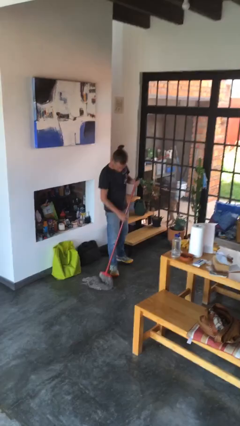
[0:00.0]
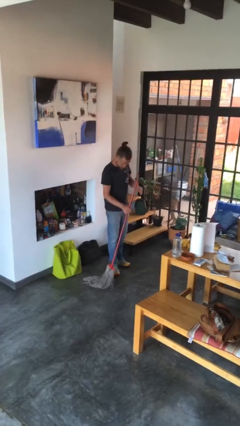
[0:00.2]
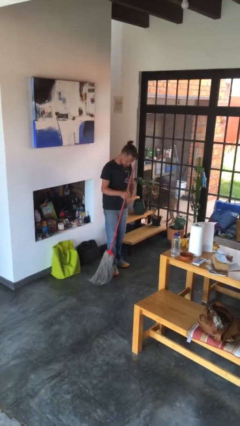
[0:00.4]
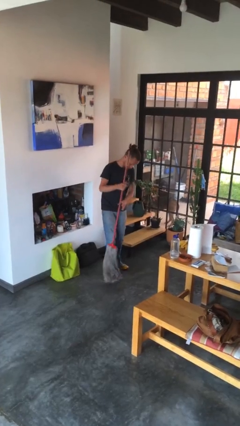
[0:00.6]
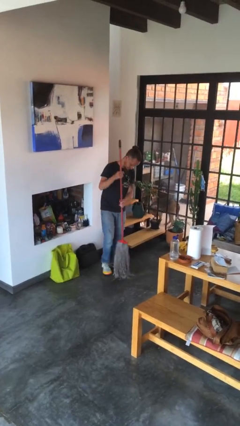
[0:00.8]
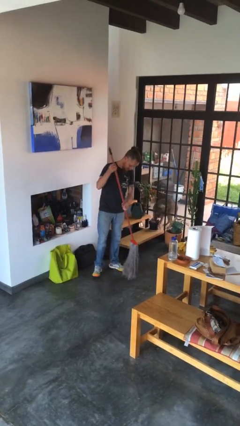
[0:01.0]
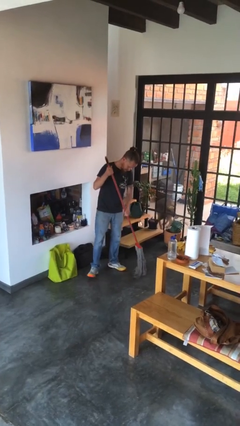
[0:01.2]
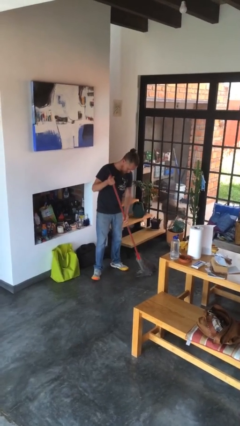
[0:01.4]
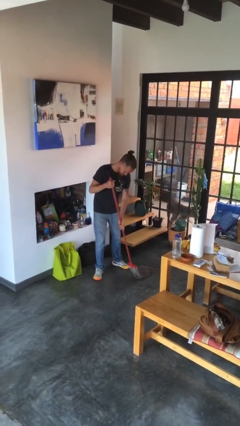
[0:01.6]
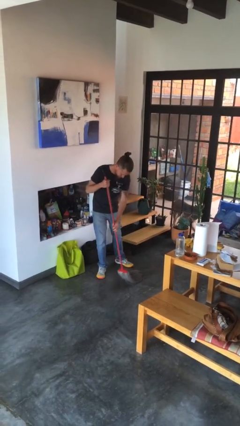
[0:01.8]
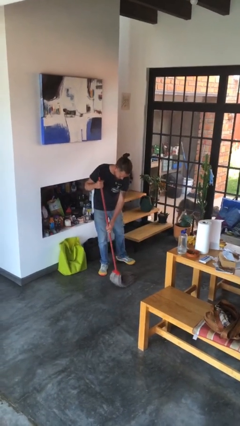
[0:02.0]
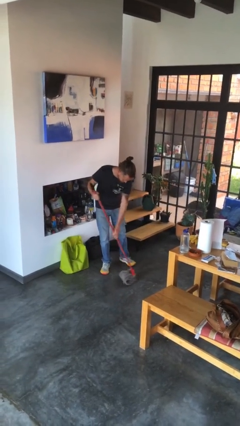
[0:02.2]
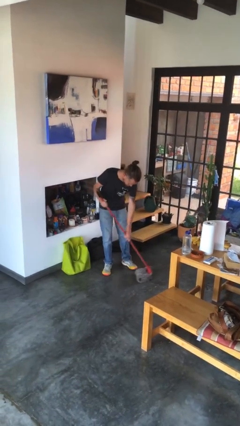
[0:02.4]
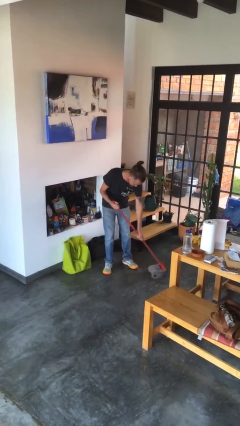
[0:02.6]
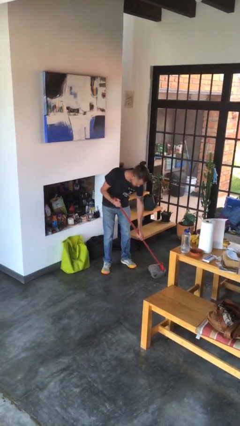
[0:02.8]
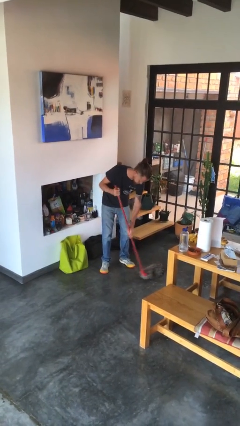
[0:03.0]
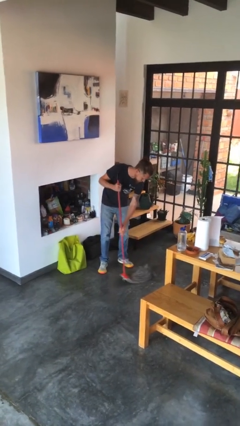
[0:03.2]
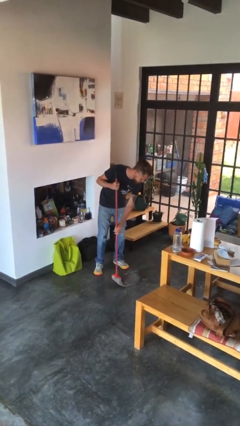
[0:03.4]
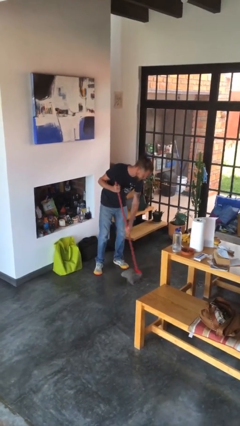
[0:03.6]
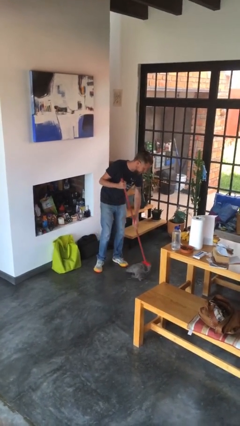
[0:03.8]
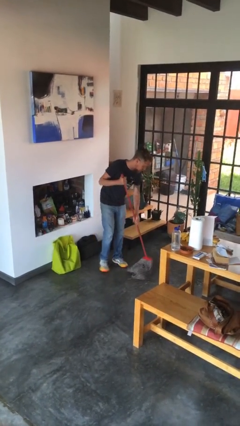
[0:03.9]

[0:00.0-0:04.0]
person mops

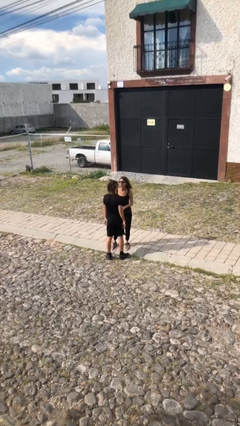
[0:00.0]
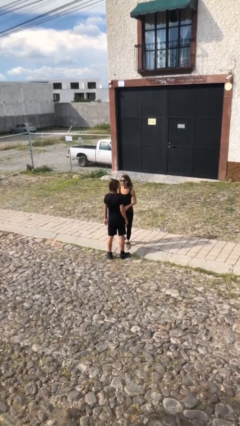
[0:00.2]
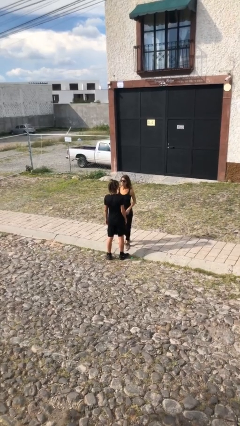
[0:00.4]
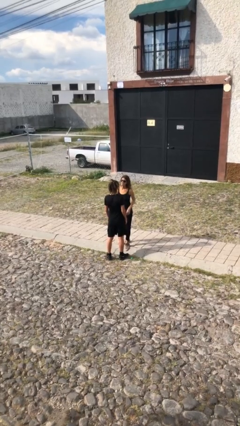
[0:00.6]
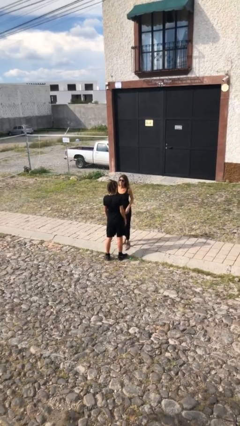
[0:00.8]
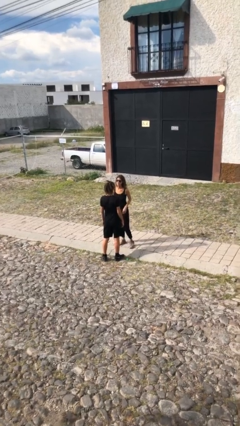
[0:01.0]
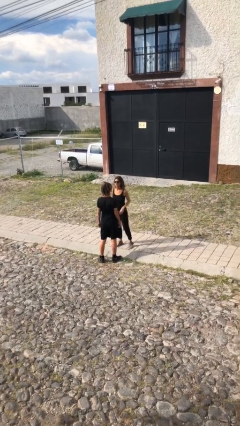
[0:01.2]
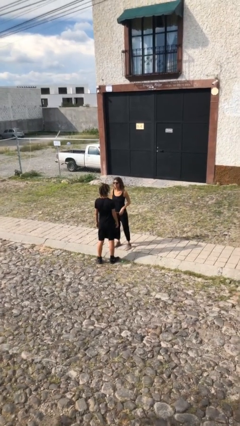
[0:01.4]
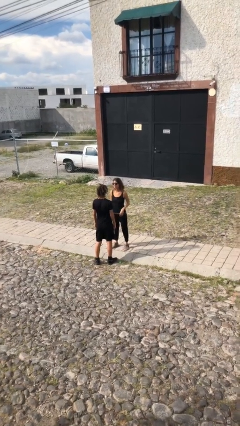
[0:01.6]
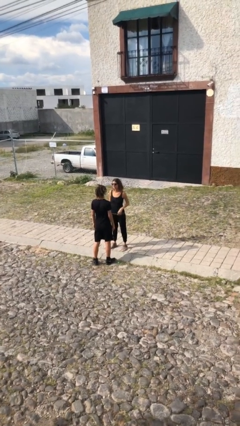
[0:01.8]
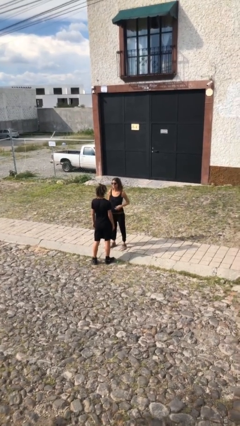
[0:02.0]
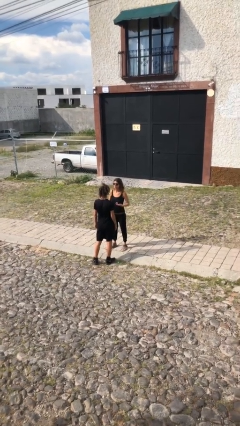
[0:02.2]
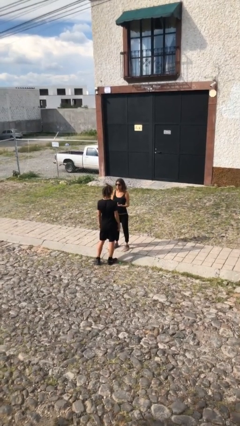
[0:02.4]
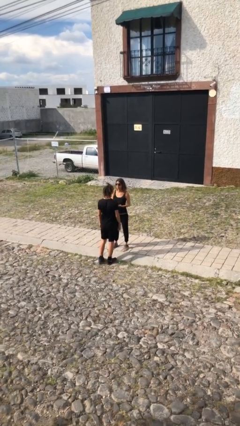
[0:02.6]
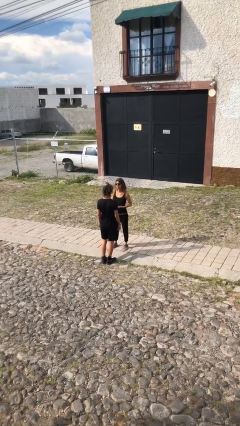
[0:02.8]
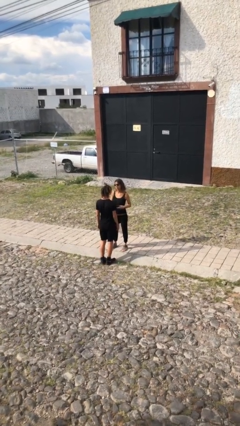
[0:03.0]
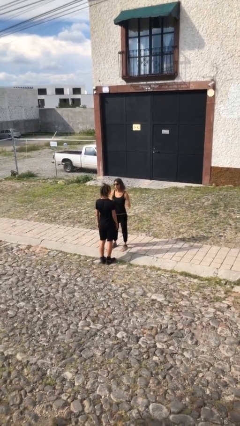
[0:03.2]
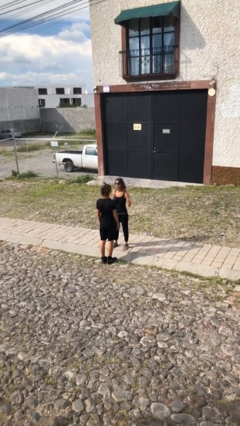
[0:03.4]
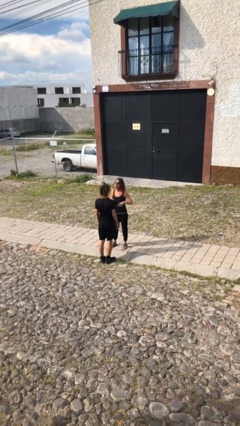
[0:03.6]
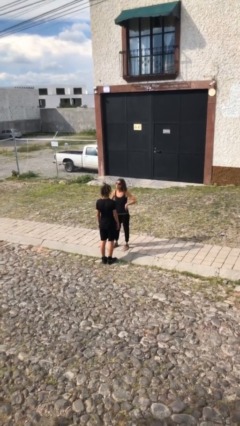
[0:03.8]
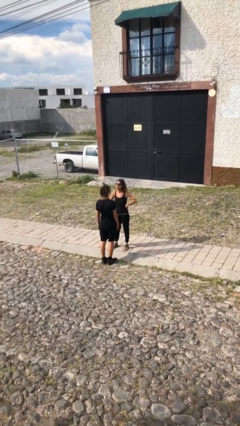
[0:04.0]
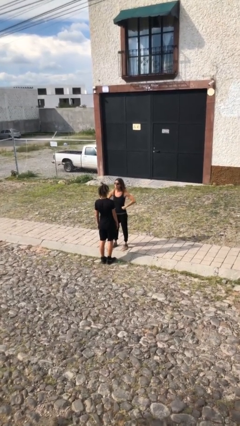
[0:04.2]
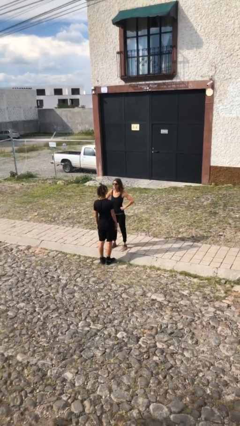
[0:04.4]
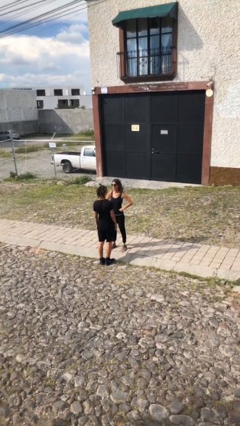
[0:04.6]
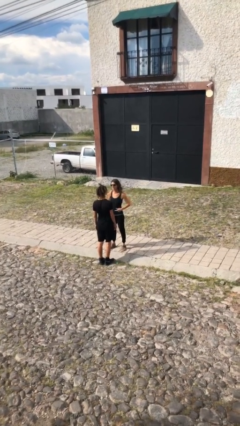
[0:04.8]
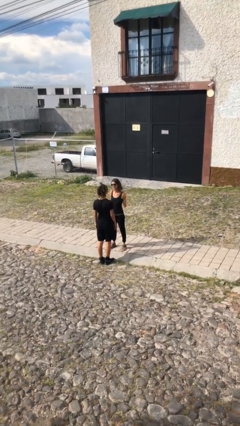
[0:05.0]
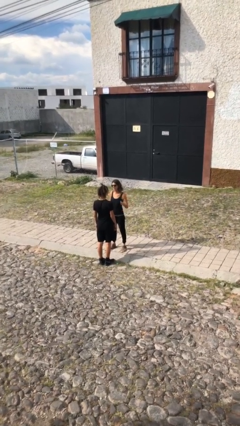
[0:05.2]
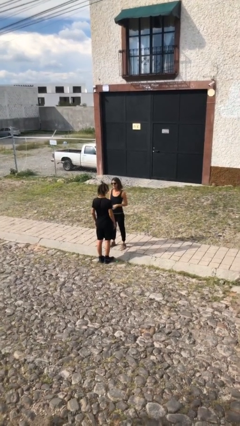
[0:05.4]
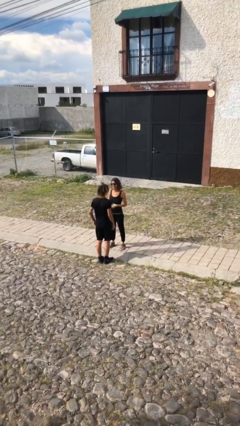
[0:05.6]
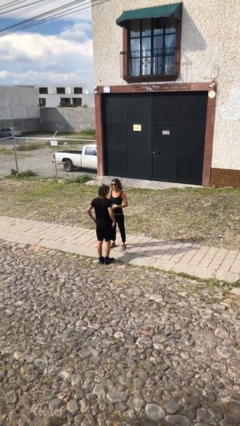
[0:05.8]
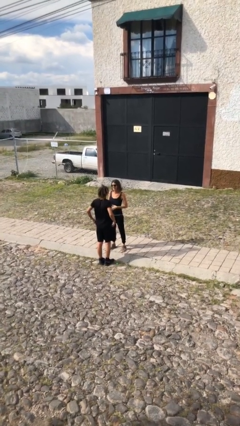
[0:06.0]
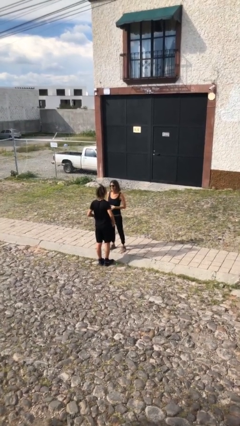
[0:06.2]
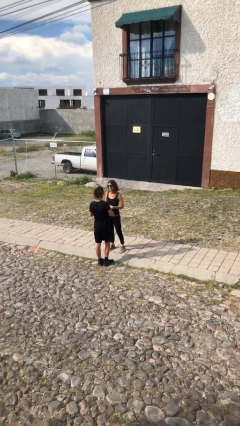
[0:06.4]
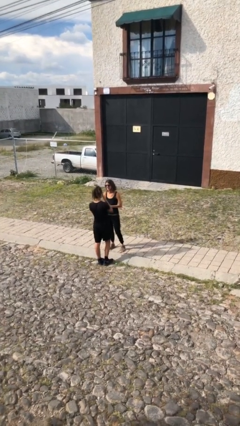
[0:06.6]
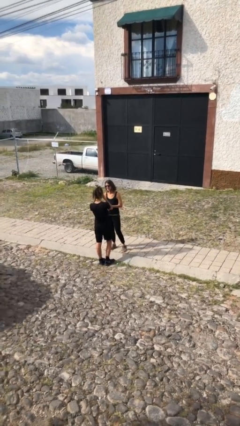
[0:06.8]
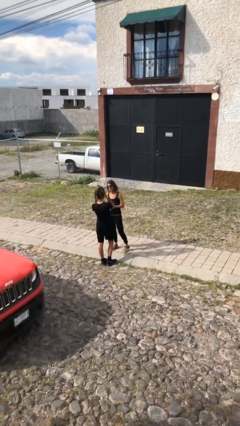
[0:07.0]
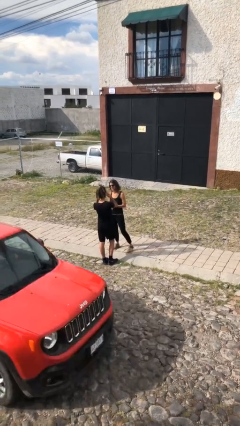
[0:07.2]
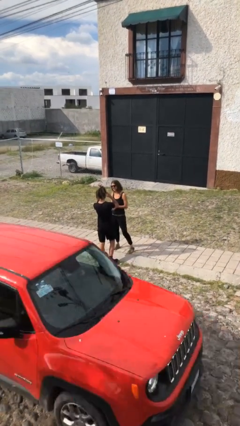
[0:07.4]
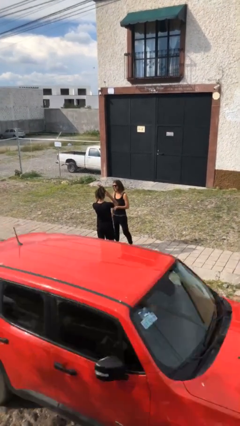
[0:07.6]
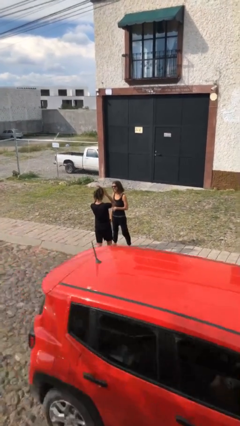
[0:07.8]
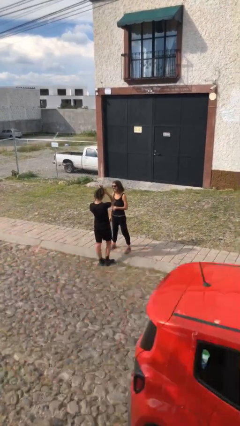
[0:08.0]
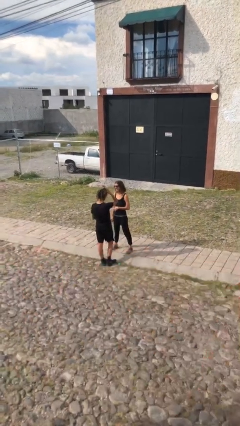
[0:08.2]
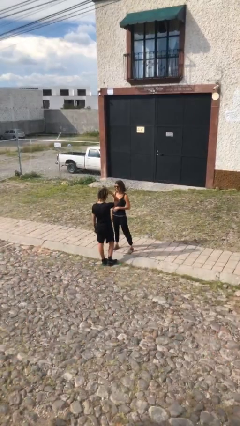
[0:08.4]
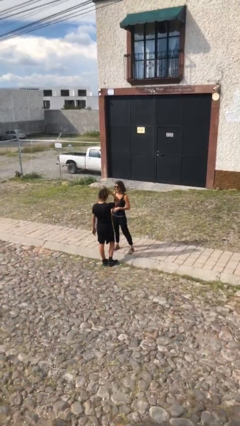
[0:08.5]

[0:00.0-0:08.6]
person talks to person

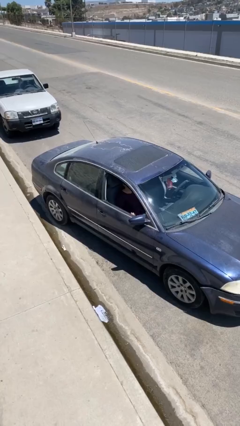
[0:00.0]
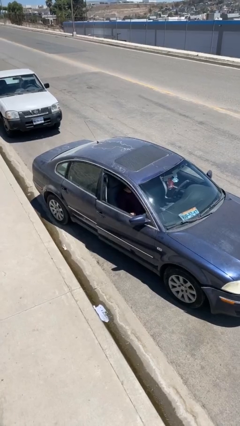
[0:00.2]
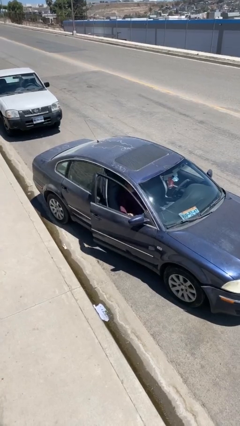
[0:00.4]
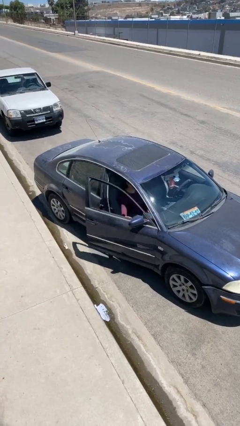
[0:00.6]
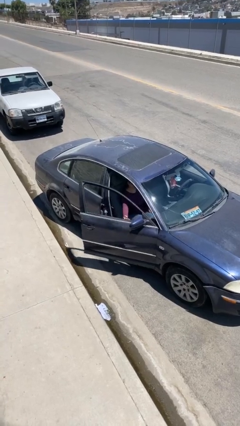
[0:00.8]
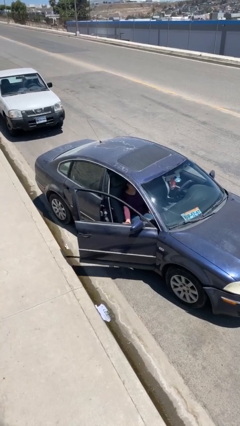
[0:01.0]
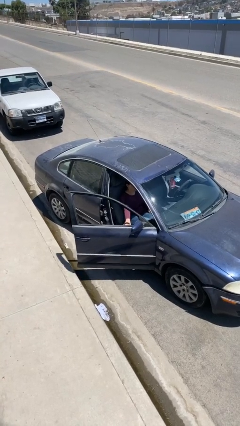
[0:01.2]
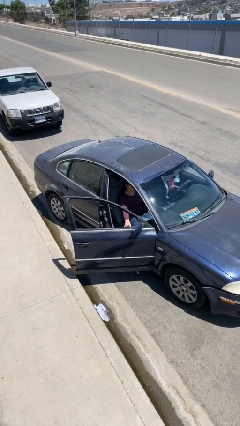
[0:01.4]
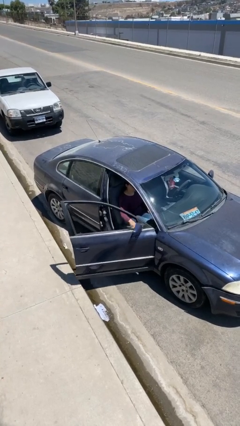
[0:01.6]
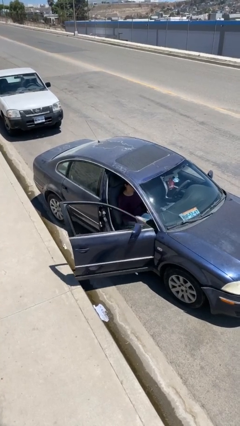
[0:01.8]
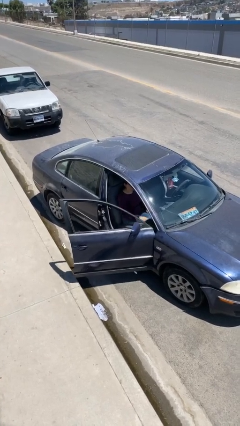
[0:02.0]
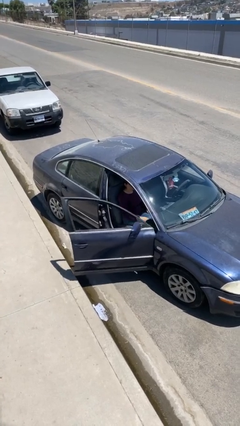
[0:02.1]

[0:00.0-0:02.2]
person opens car door

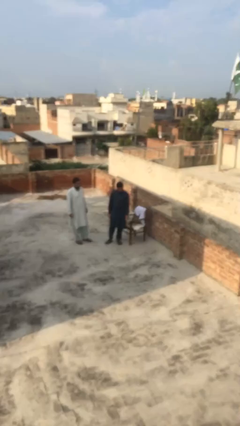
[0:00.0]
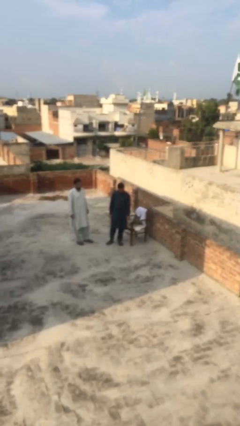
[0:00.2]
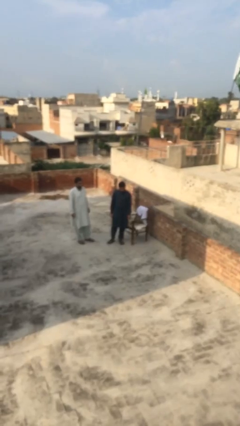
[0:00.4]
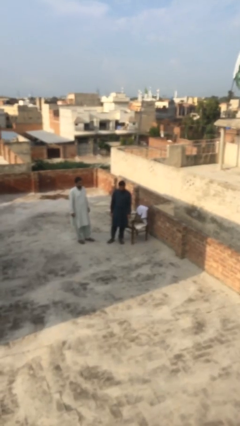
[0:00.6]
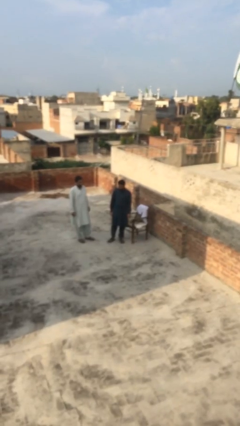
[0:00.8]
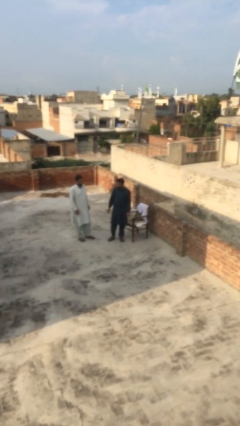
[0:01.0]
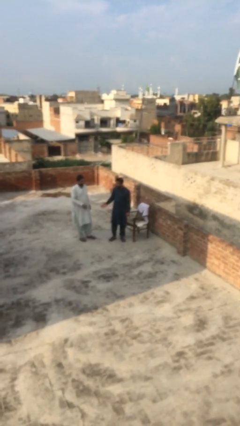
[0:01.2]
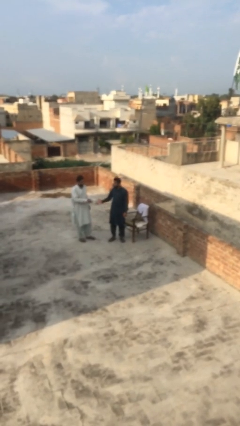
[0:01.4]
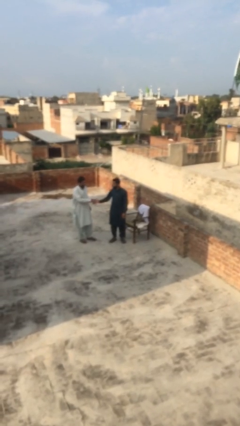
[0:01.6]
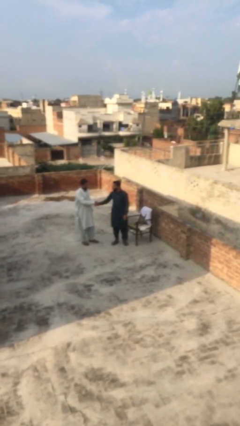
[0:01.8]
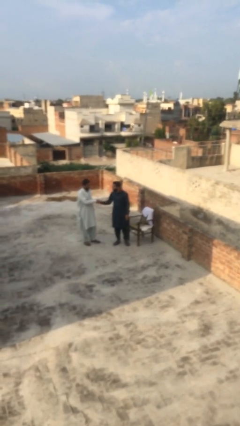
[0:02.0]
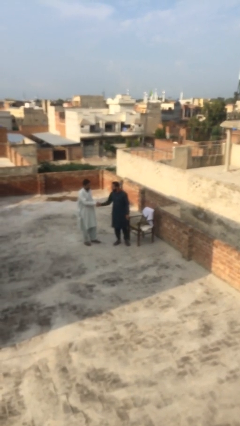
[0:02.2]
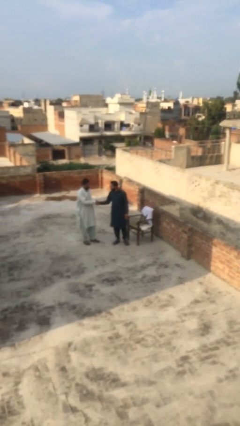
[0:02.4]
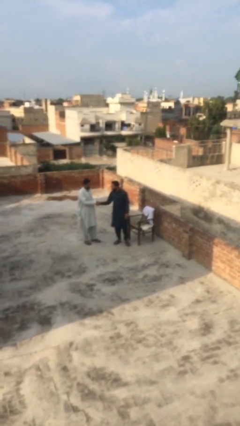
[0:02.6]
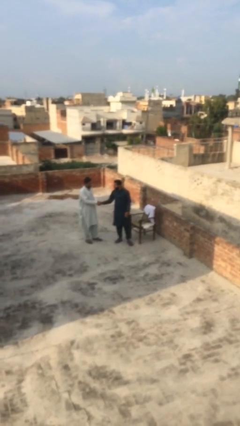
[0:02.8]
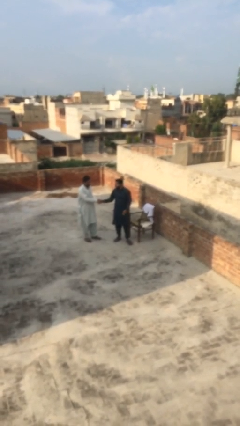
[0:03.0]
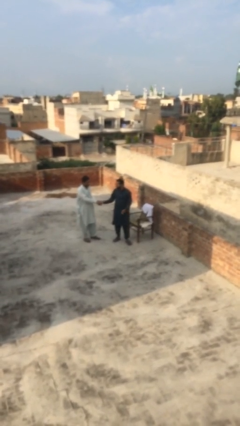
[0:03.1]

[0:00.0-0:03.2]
person shakes hand
